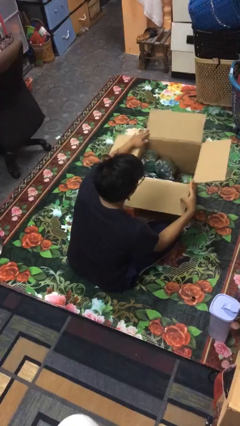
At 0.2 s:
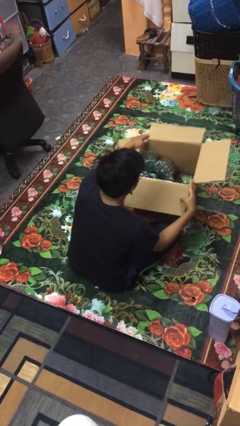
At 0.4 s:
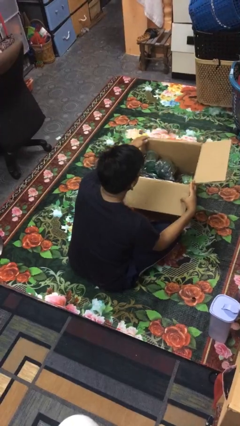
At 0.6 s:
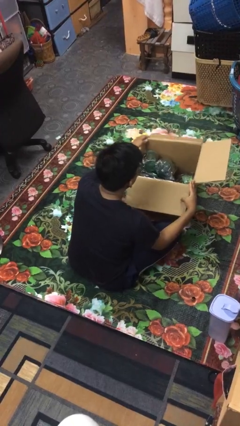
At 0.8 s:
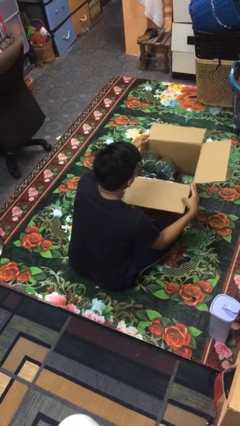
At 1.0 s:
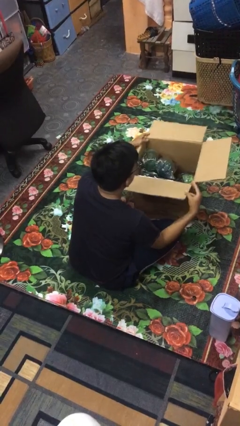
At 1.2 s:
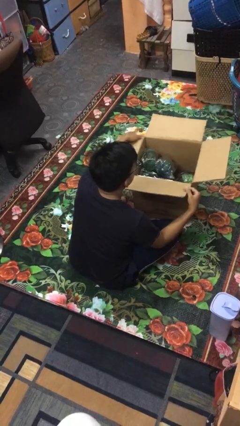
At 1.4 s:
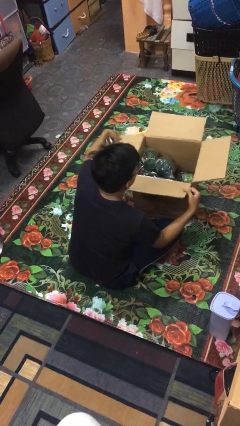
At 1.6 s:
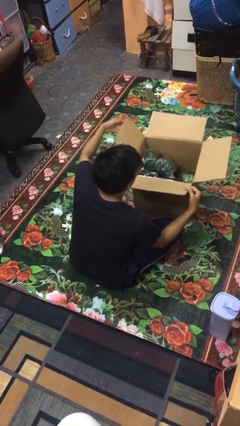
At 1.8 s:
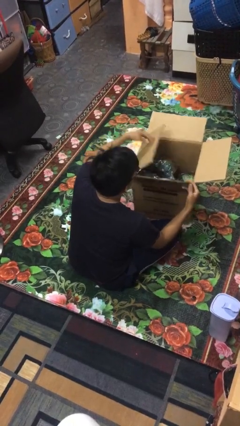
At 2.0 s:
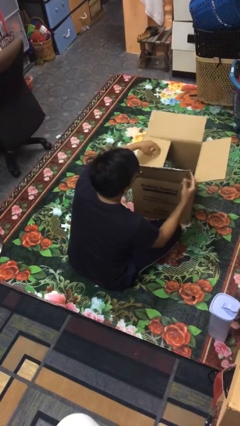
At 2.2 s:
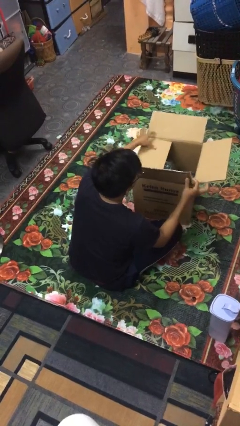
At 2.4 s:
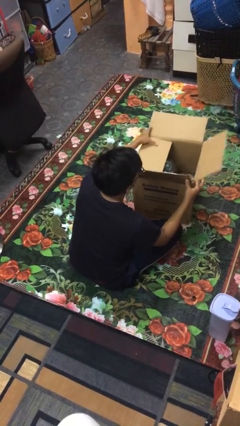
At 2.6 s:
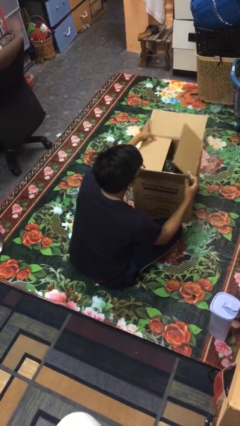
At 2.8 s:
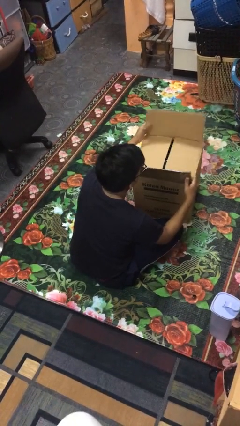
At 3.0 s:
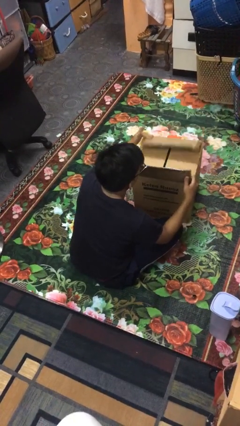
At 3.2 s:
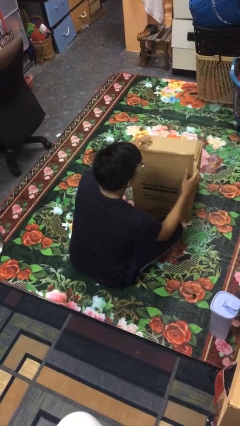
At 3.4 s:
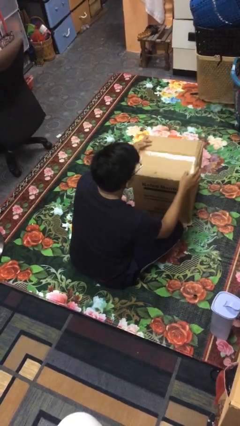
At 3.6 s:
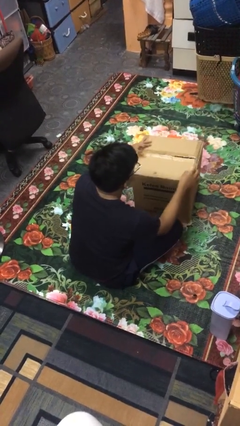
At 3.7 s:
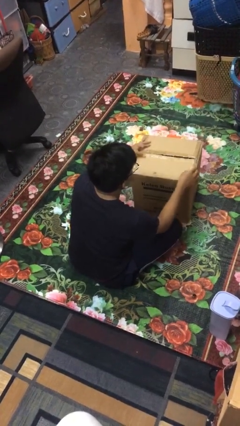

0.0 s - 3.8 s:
person closes box

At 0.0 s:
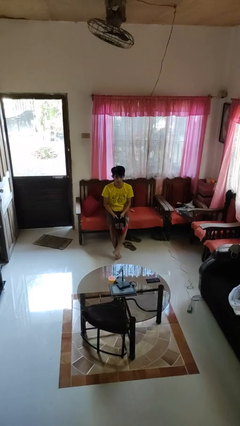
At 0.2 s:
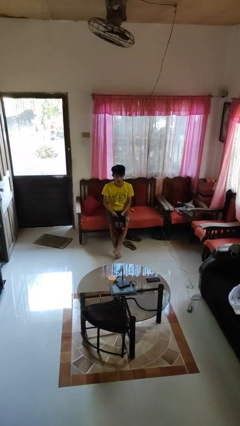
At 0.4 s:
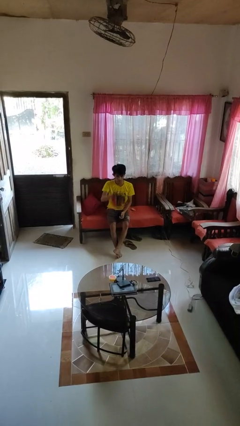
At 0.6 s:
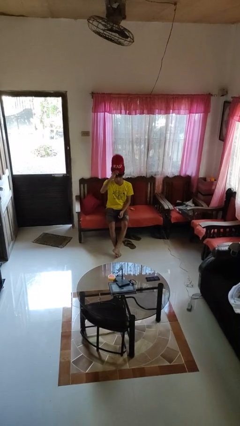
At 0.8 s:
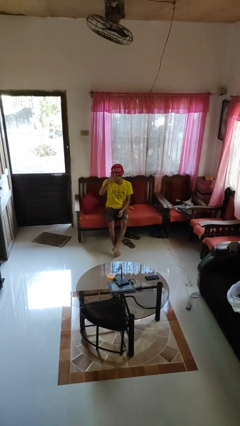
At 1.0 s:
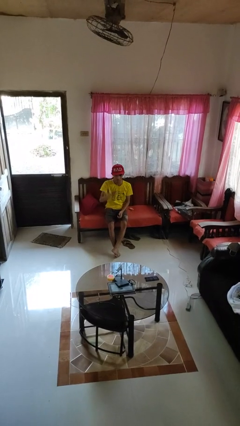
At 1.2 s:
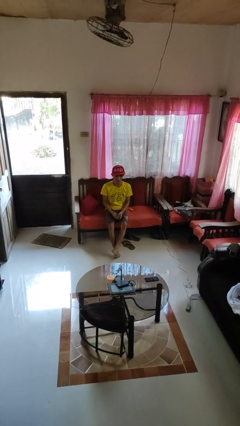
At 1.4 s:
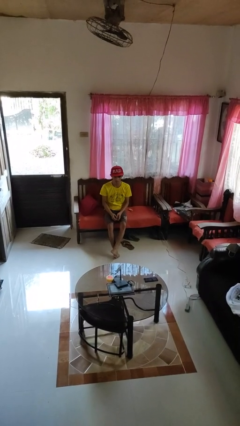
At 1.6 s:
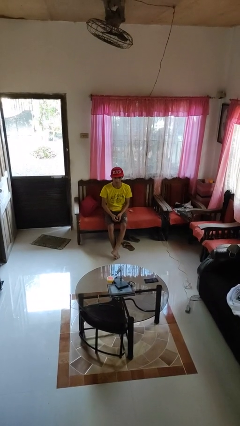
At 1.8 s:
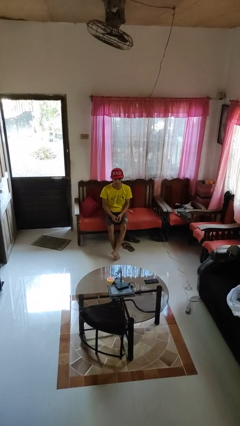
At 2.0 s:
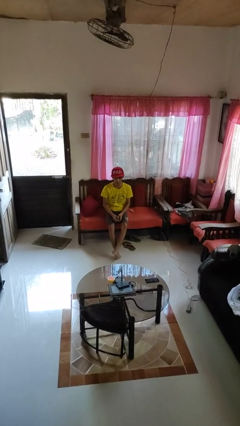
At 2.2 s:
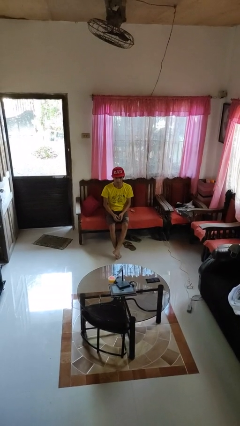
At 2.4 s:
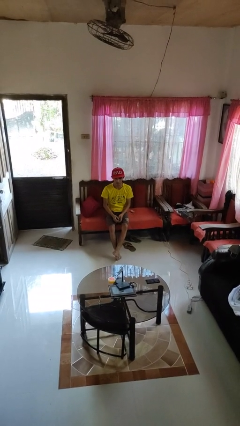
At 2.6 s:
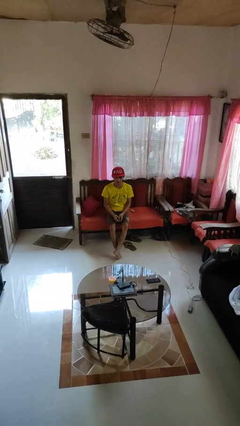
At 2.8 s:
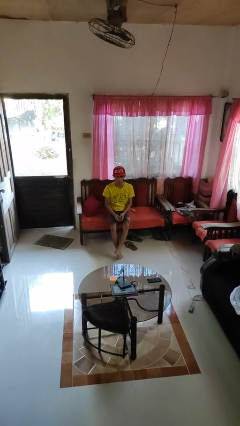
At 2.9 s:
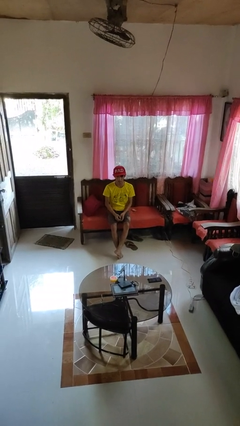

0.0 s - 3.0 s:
person puts on hat

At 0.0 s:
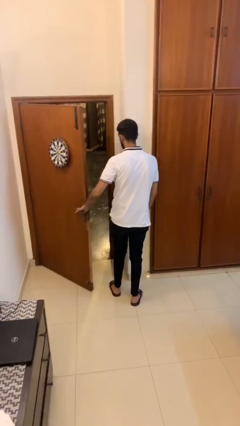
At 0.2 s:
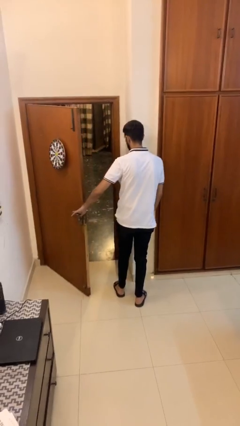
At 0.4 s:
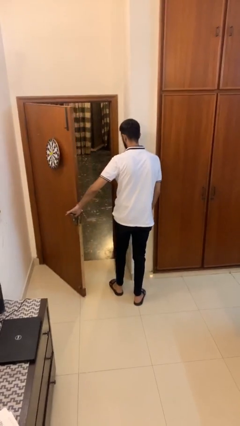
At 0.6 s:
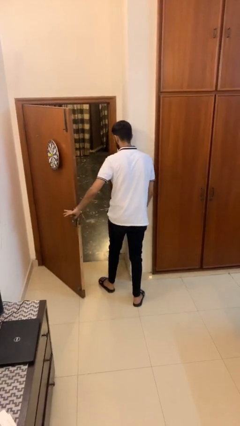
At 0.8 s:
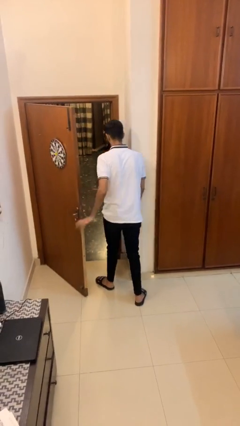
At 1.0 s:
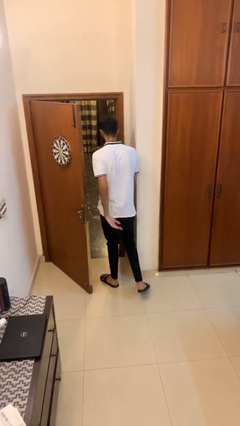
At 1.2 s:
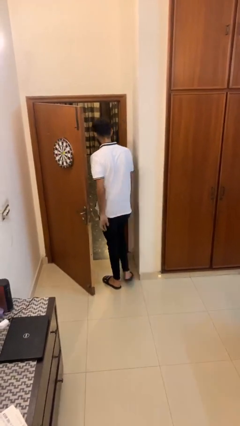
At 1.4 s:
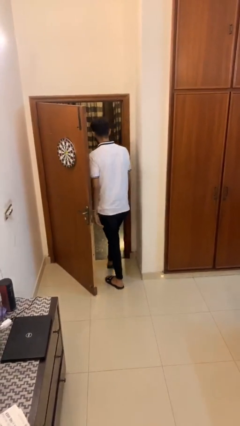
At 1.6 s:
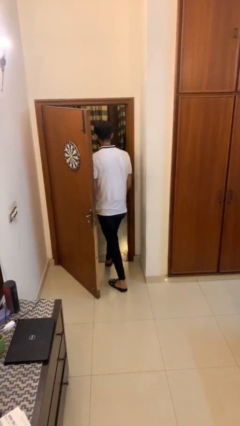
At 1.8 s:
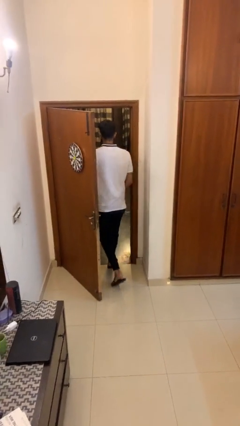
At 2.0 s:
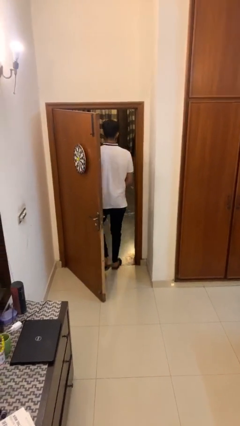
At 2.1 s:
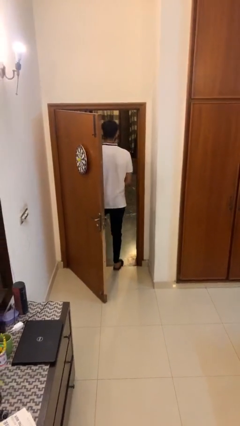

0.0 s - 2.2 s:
person exits scene through structure

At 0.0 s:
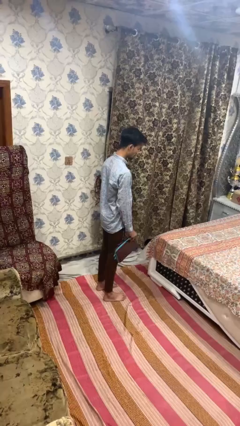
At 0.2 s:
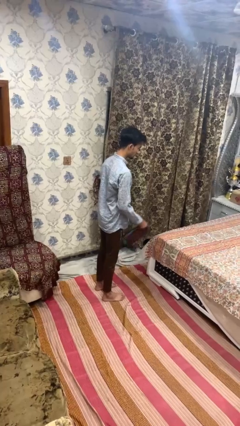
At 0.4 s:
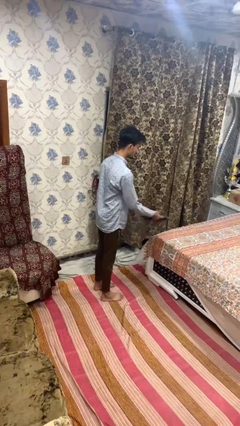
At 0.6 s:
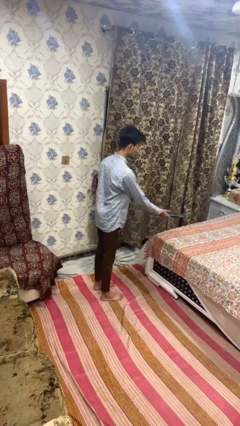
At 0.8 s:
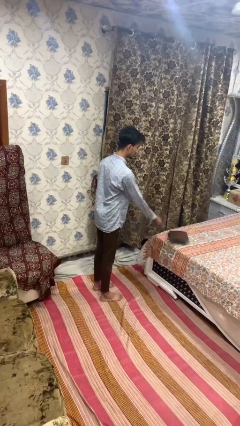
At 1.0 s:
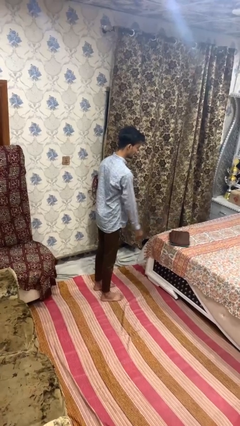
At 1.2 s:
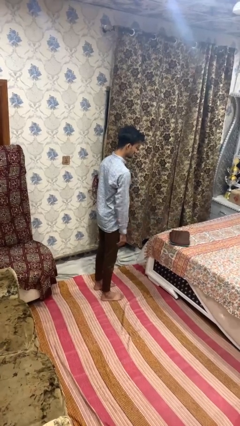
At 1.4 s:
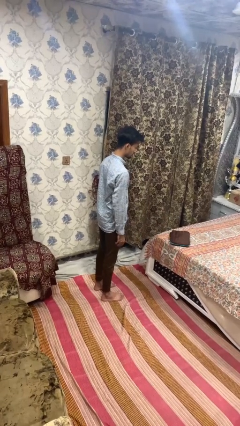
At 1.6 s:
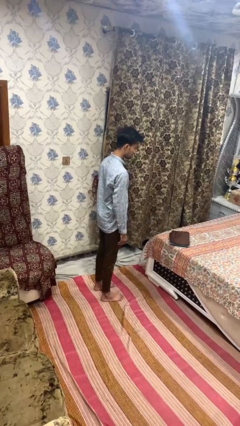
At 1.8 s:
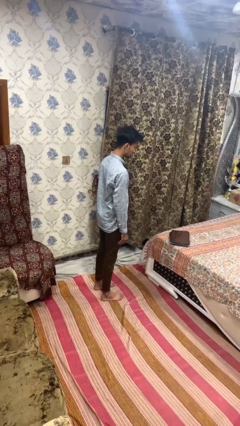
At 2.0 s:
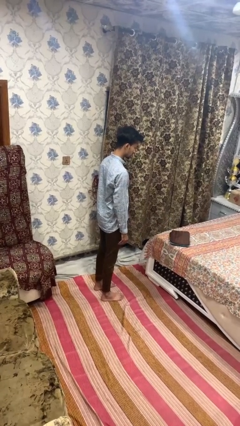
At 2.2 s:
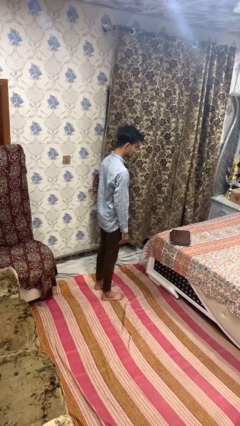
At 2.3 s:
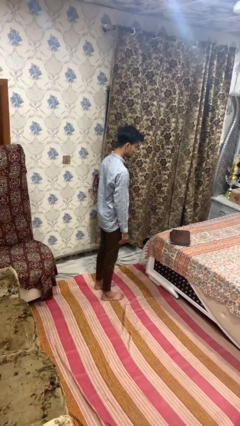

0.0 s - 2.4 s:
person throws object on bed

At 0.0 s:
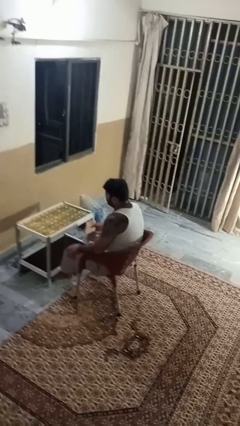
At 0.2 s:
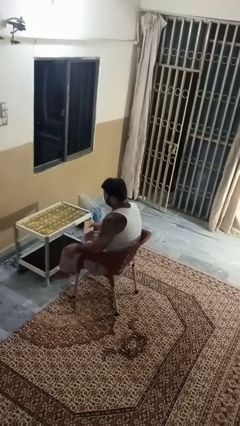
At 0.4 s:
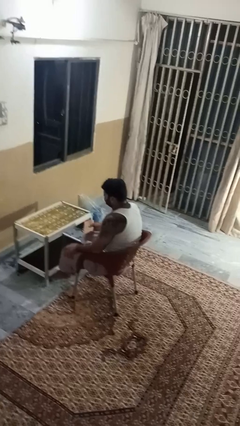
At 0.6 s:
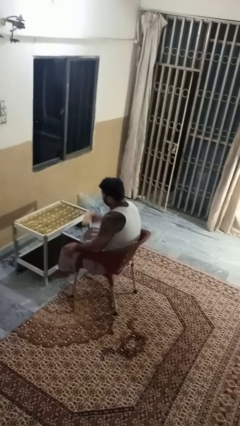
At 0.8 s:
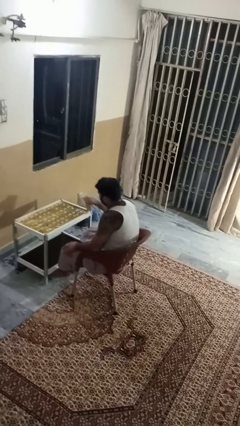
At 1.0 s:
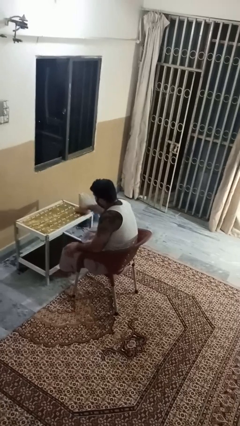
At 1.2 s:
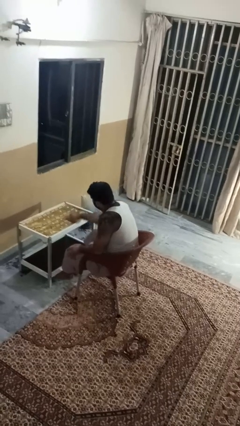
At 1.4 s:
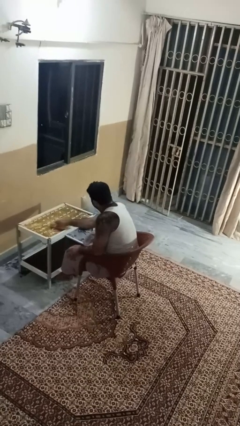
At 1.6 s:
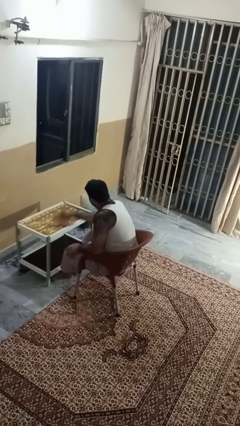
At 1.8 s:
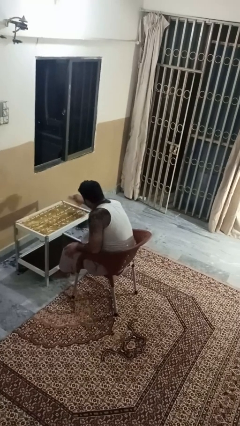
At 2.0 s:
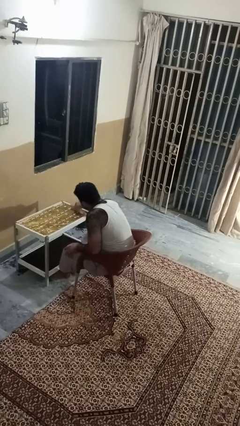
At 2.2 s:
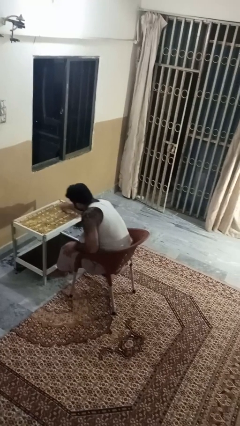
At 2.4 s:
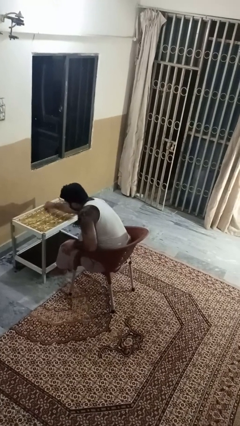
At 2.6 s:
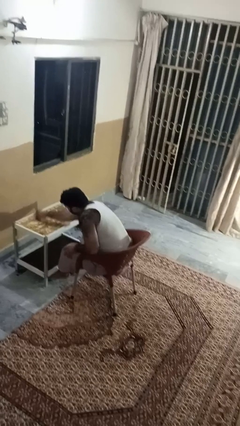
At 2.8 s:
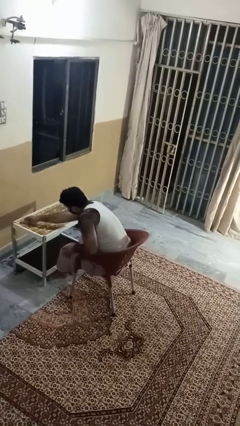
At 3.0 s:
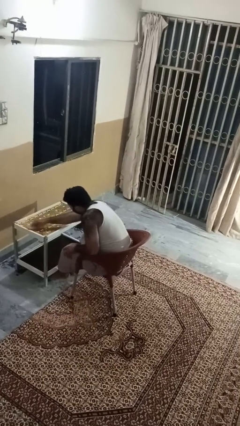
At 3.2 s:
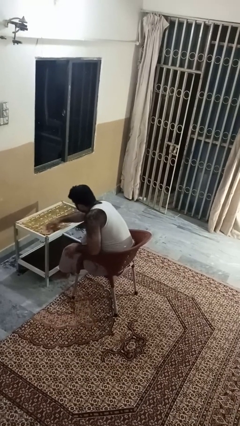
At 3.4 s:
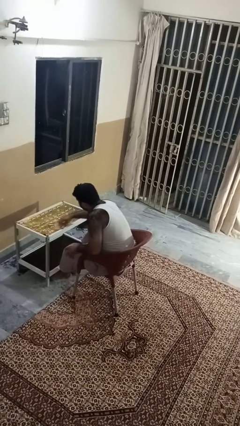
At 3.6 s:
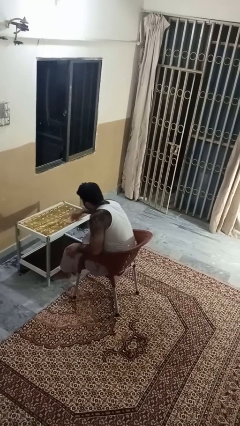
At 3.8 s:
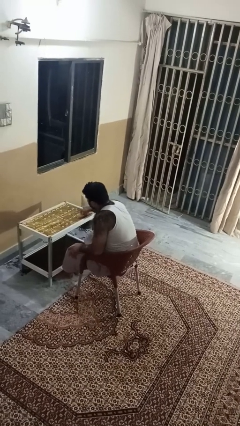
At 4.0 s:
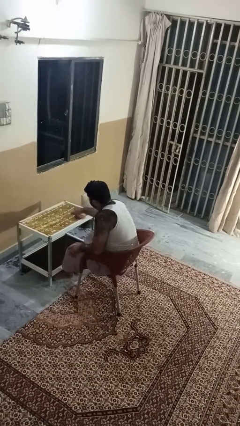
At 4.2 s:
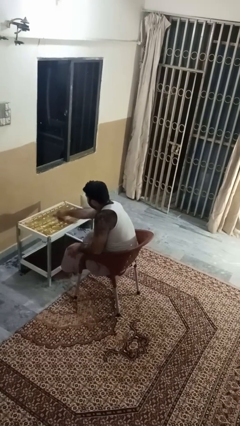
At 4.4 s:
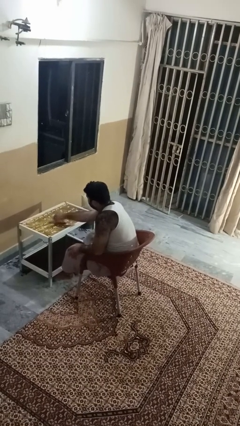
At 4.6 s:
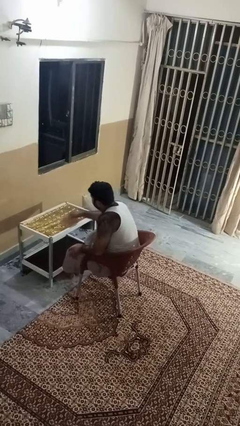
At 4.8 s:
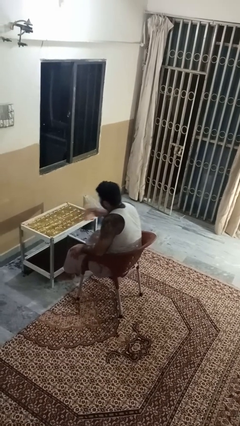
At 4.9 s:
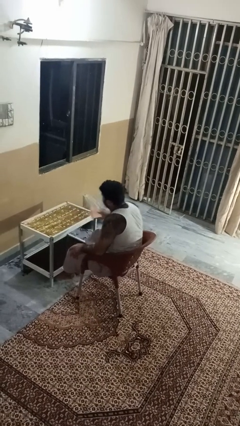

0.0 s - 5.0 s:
person cleans table with rag

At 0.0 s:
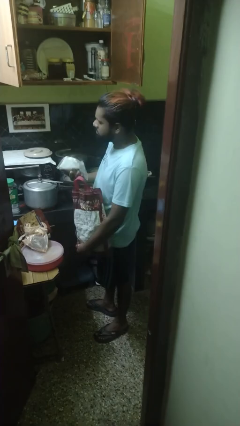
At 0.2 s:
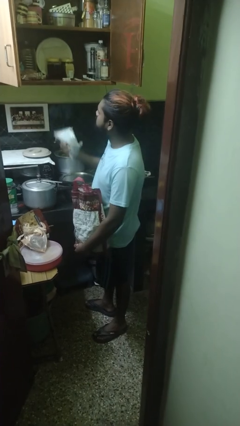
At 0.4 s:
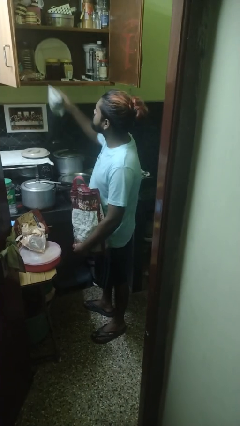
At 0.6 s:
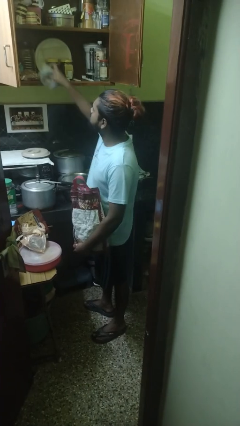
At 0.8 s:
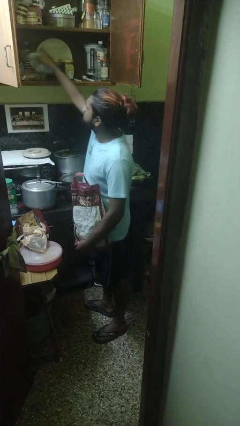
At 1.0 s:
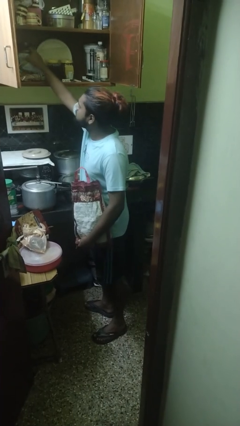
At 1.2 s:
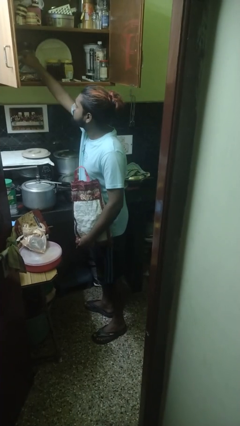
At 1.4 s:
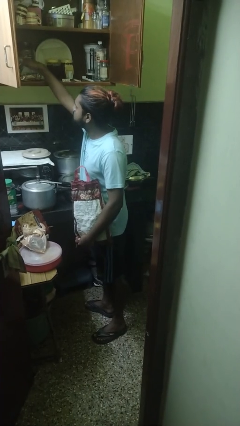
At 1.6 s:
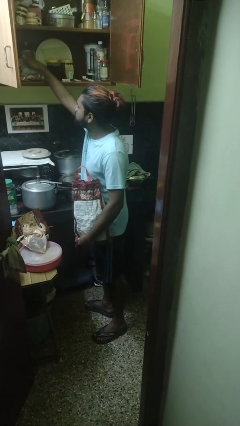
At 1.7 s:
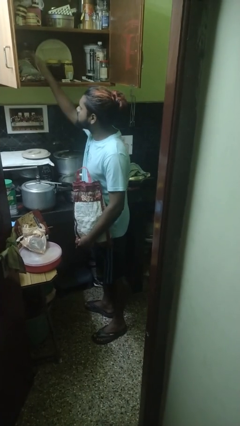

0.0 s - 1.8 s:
person loads groceries into cabinet
